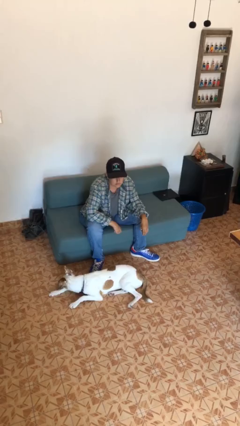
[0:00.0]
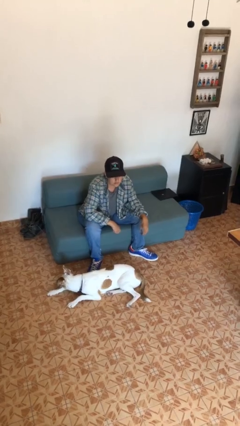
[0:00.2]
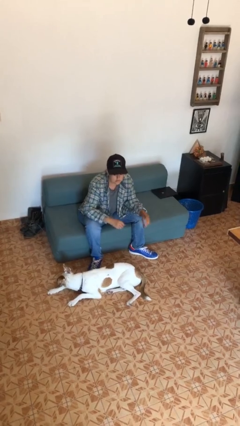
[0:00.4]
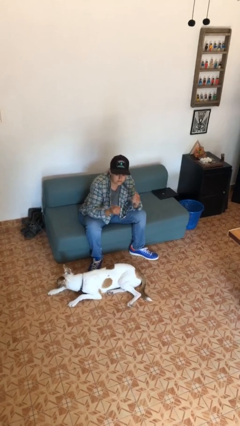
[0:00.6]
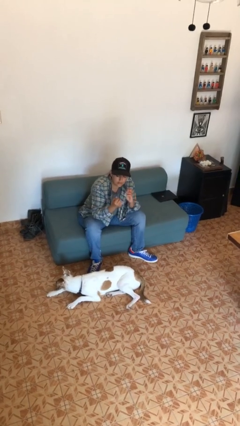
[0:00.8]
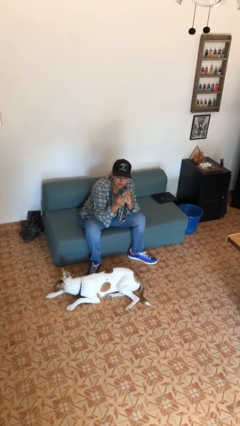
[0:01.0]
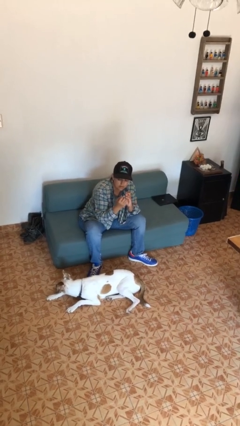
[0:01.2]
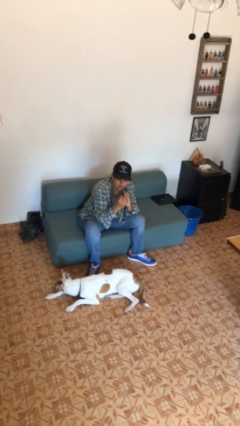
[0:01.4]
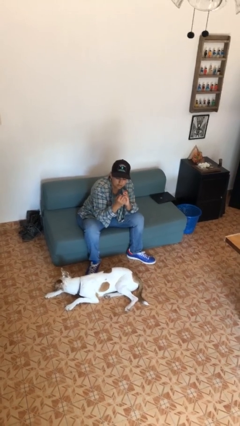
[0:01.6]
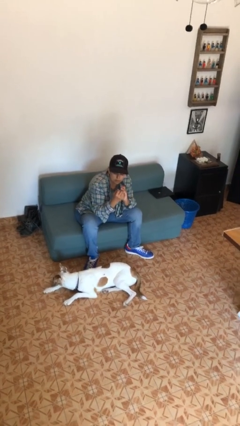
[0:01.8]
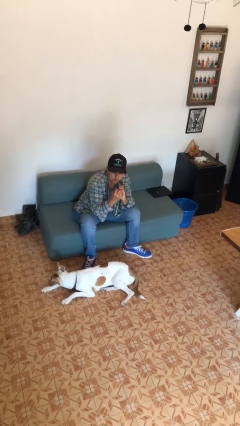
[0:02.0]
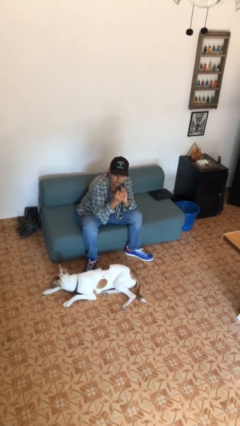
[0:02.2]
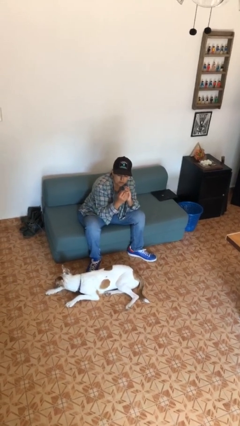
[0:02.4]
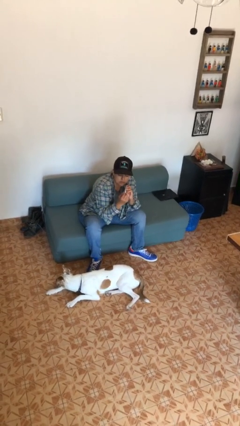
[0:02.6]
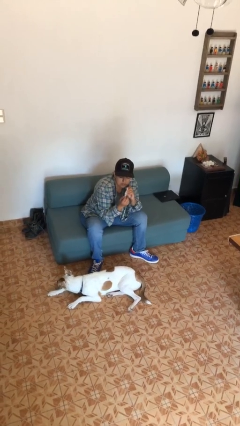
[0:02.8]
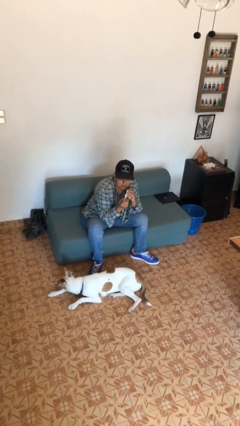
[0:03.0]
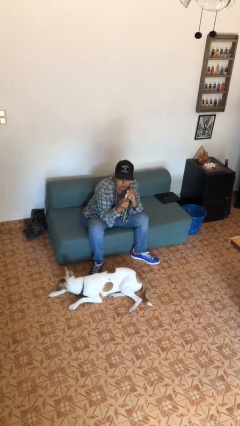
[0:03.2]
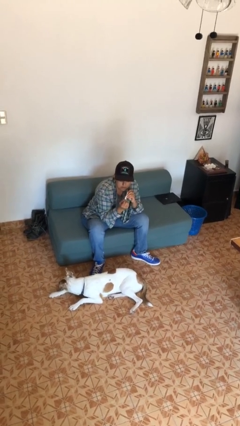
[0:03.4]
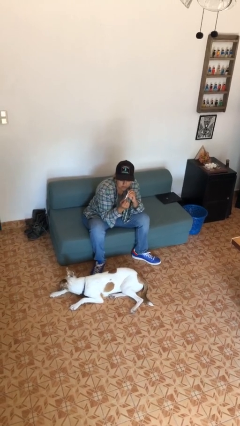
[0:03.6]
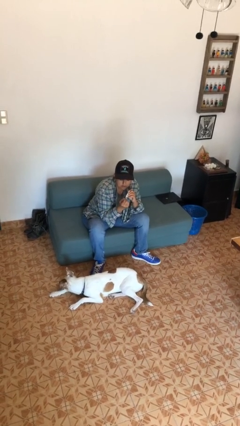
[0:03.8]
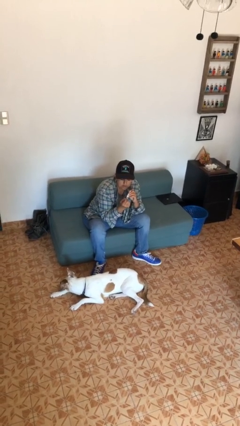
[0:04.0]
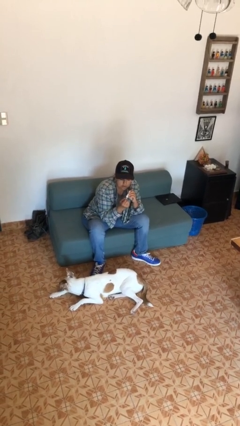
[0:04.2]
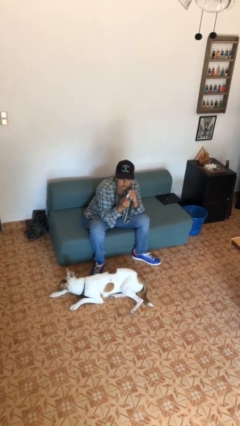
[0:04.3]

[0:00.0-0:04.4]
person clips fingernails

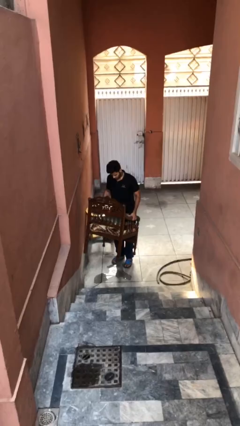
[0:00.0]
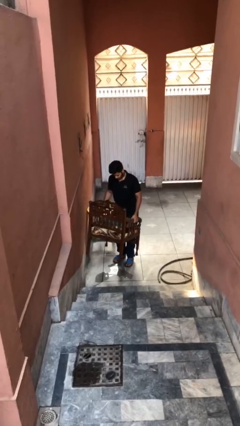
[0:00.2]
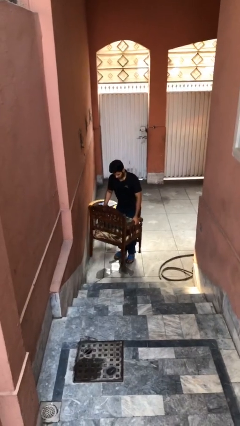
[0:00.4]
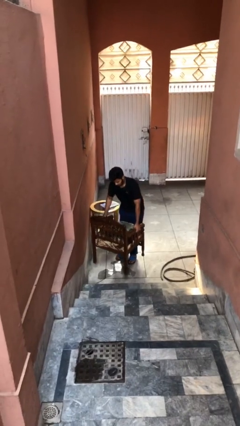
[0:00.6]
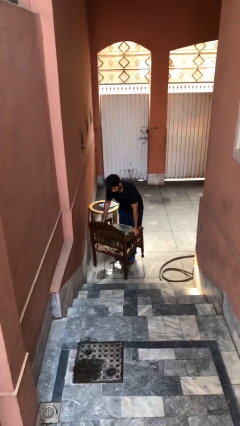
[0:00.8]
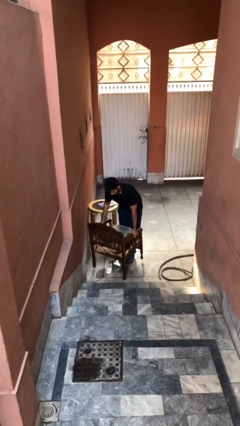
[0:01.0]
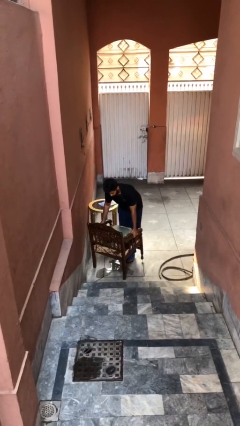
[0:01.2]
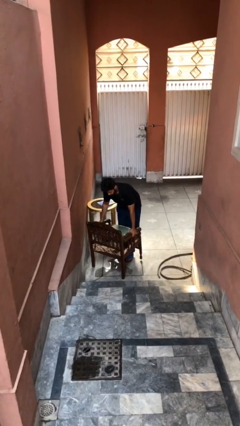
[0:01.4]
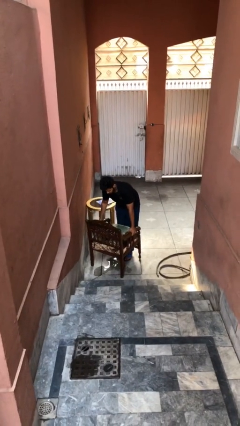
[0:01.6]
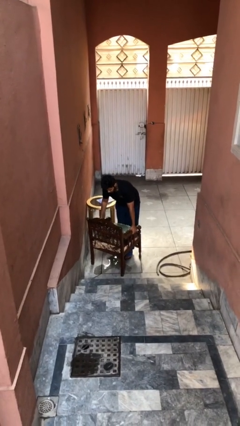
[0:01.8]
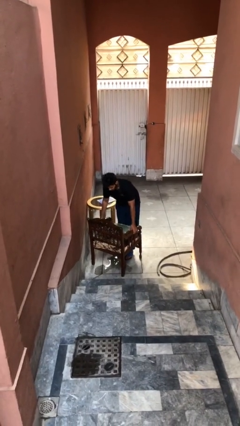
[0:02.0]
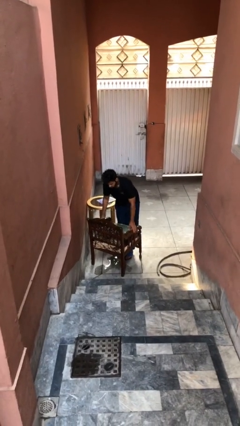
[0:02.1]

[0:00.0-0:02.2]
person puts down object on floor

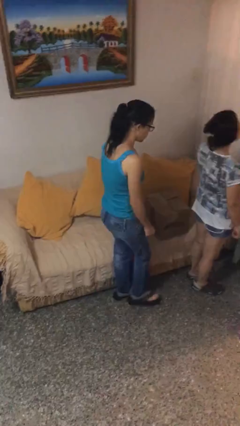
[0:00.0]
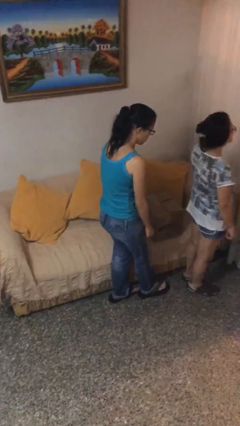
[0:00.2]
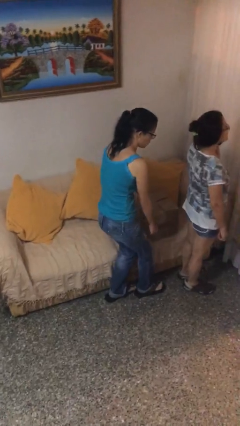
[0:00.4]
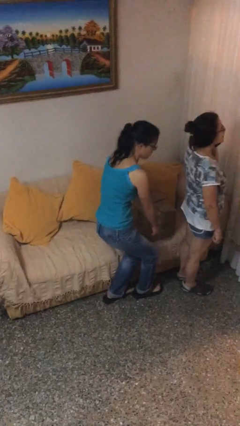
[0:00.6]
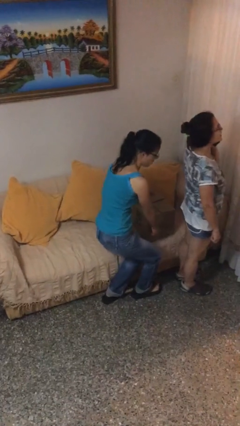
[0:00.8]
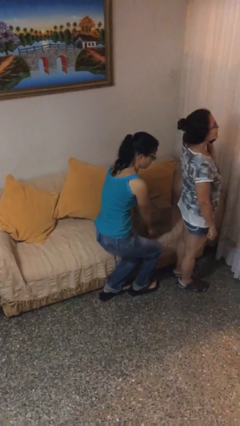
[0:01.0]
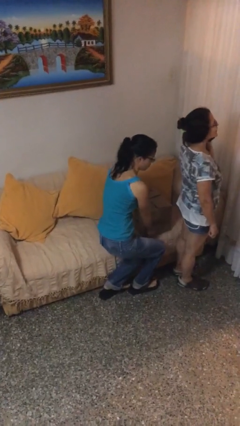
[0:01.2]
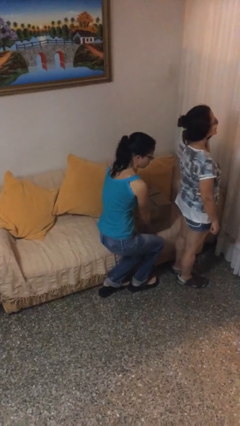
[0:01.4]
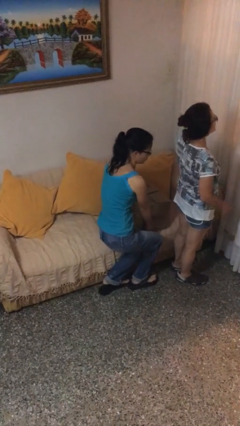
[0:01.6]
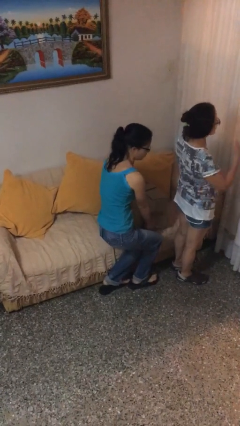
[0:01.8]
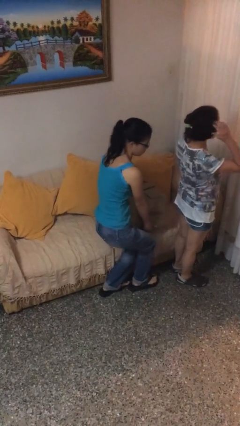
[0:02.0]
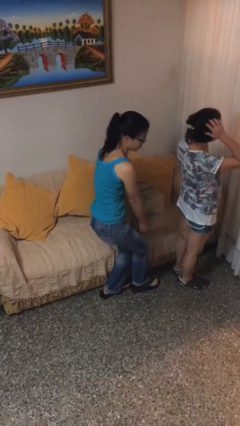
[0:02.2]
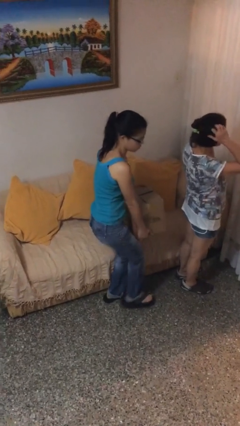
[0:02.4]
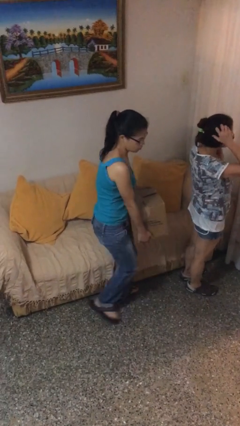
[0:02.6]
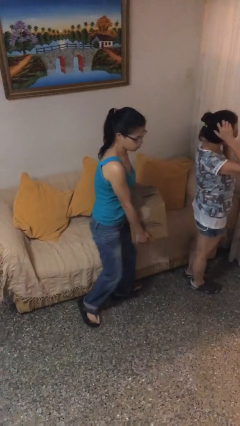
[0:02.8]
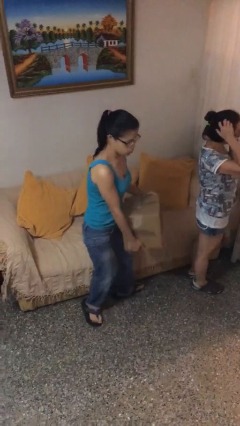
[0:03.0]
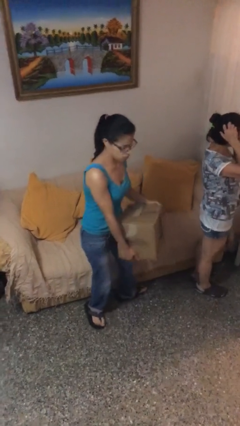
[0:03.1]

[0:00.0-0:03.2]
person steals object from person

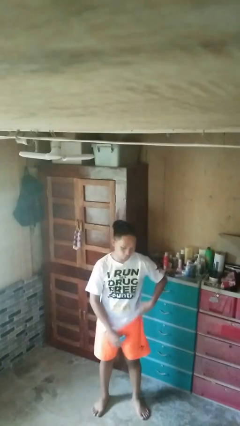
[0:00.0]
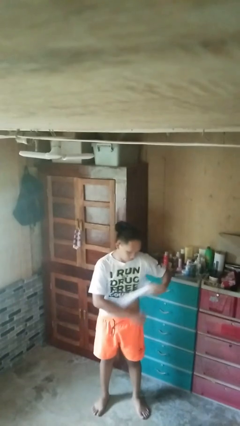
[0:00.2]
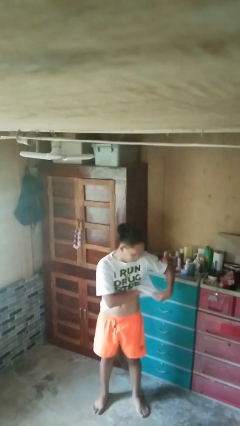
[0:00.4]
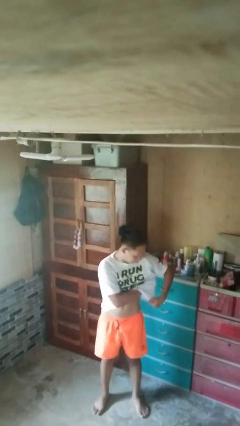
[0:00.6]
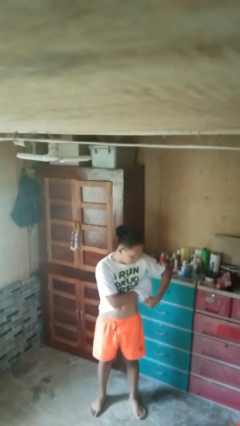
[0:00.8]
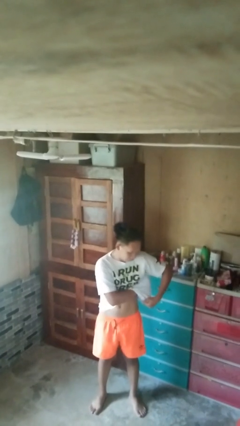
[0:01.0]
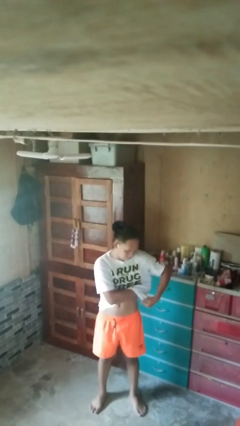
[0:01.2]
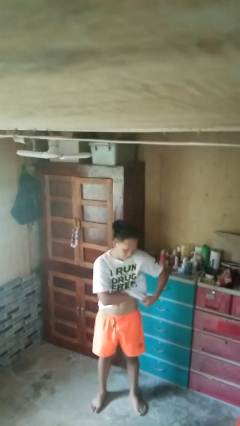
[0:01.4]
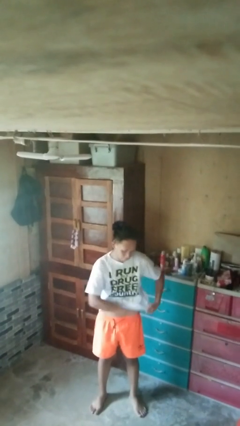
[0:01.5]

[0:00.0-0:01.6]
person applies deodorant

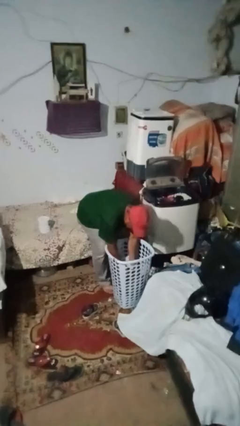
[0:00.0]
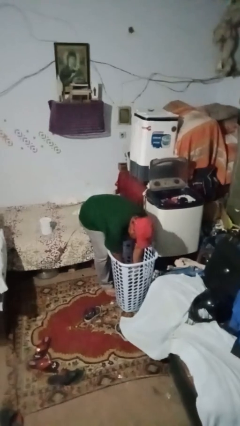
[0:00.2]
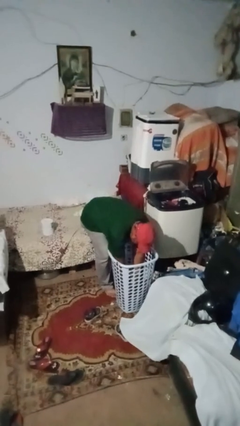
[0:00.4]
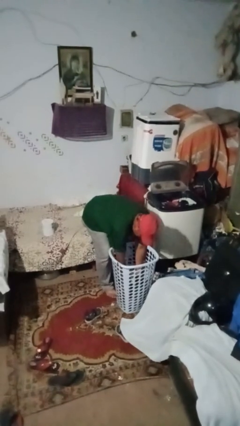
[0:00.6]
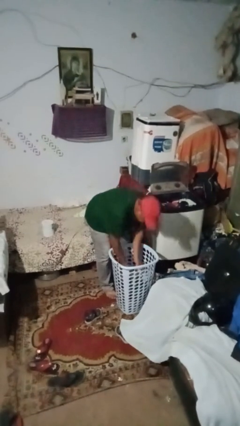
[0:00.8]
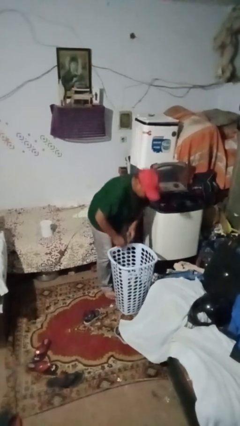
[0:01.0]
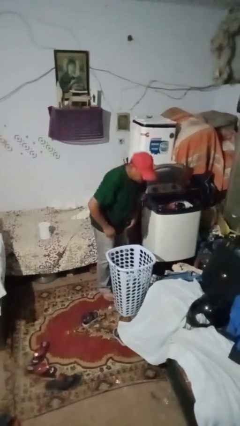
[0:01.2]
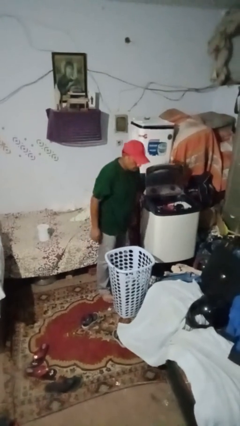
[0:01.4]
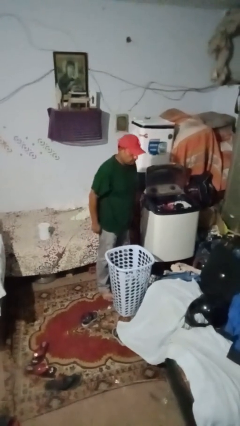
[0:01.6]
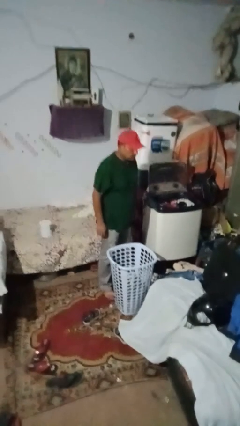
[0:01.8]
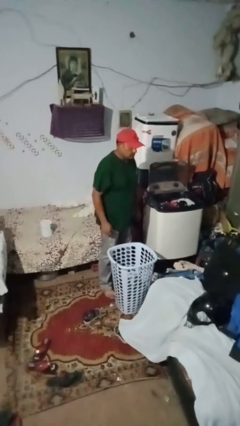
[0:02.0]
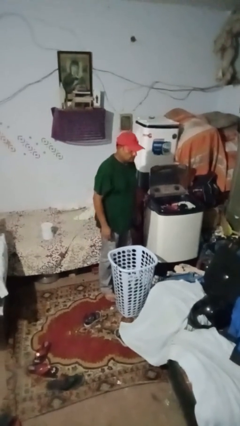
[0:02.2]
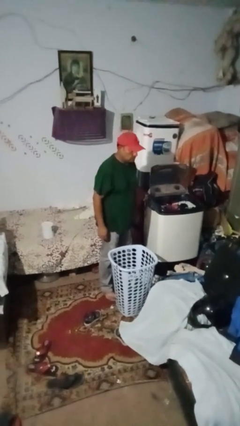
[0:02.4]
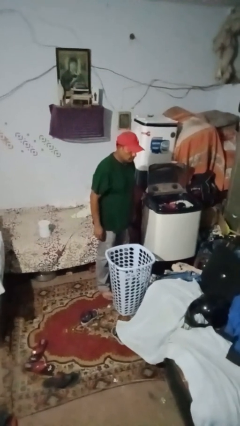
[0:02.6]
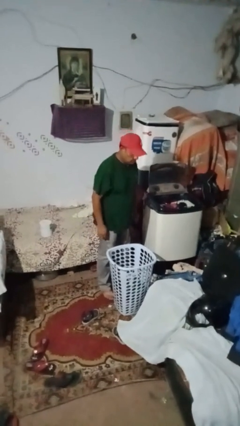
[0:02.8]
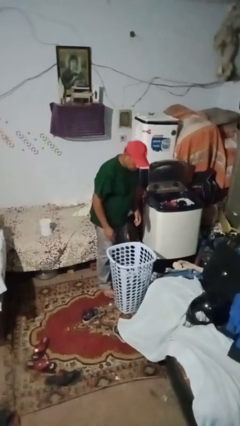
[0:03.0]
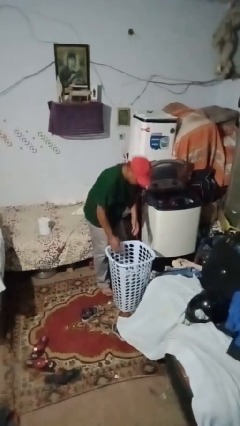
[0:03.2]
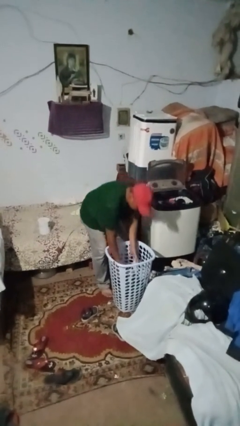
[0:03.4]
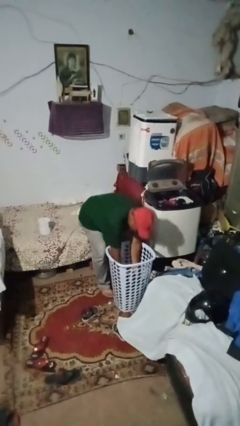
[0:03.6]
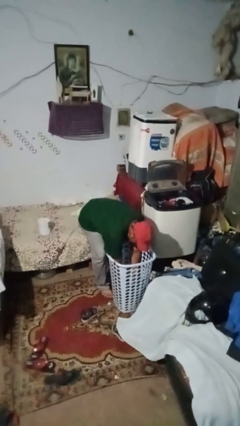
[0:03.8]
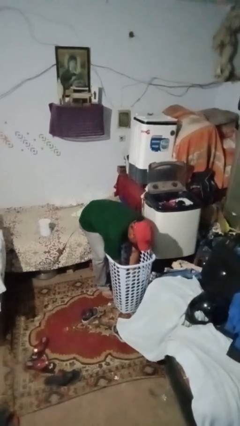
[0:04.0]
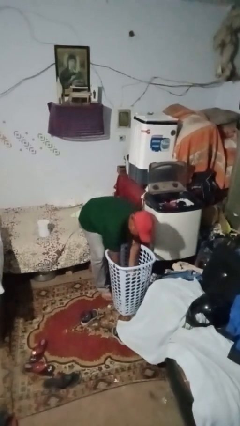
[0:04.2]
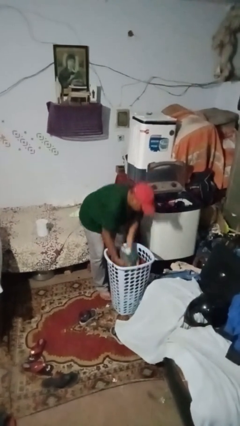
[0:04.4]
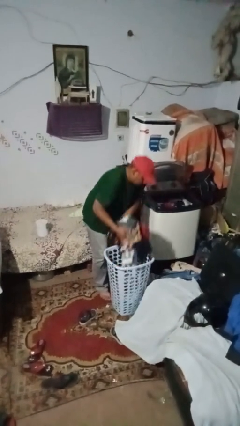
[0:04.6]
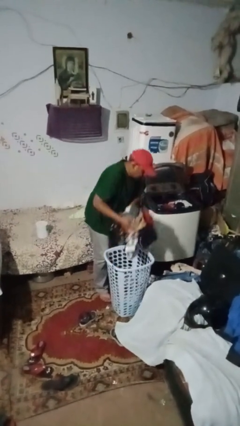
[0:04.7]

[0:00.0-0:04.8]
person unloads dryer

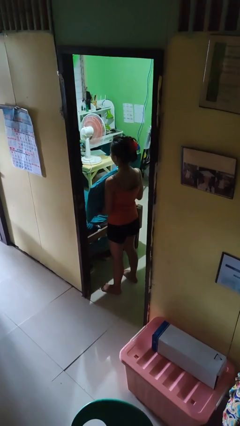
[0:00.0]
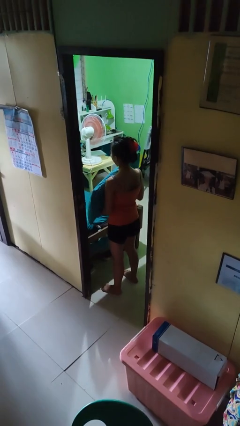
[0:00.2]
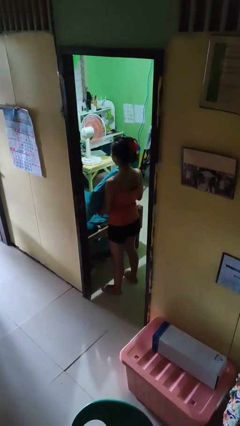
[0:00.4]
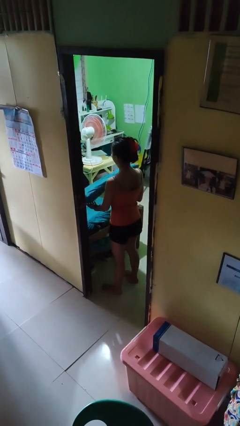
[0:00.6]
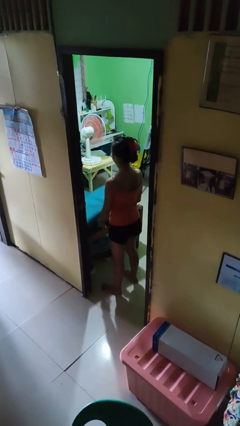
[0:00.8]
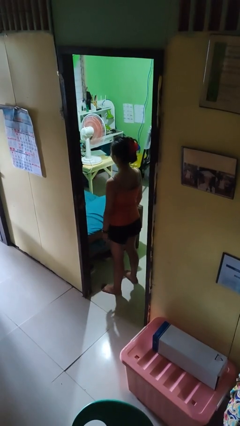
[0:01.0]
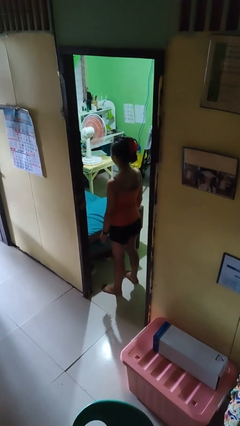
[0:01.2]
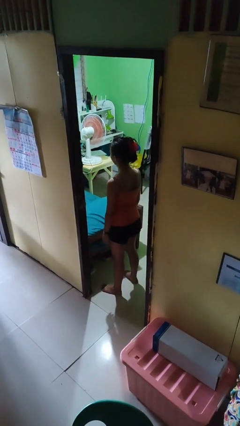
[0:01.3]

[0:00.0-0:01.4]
person puts down object on bed
